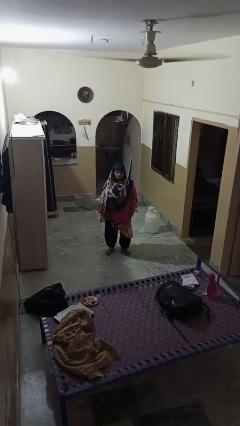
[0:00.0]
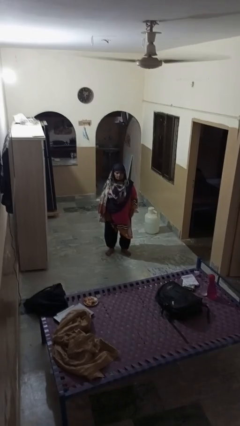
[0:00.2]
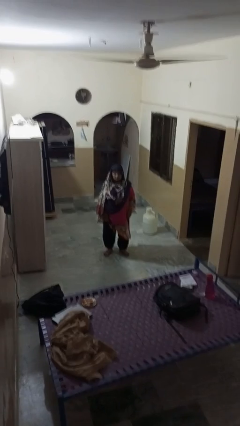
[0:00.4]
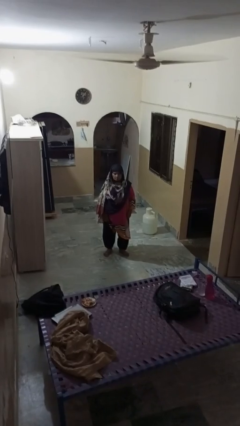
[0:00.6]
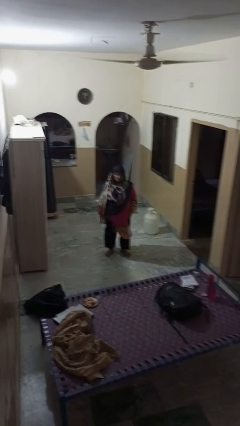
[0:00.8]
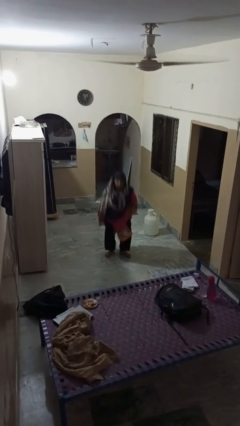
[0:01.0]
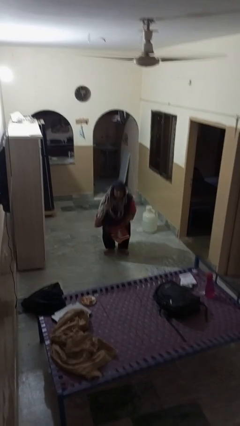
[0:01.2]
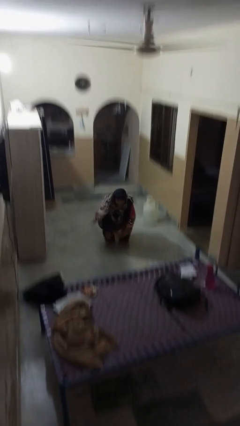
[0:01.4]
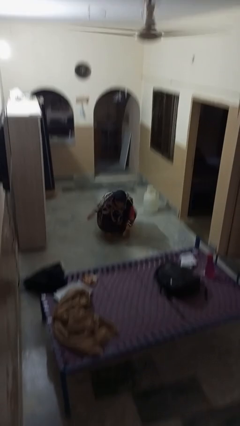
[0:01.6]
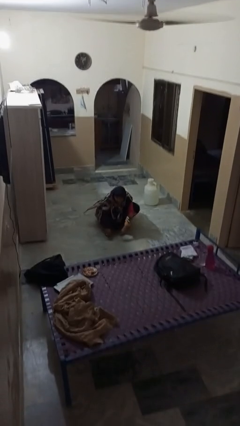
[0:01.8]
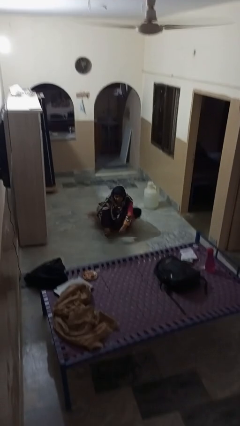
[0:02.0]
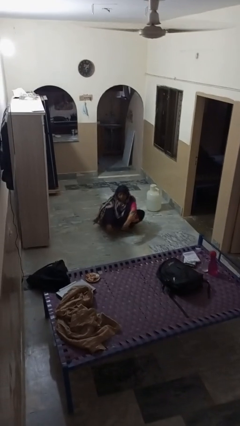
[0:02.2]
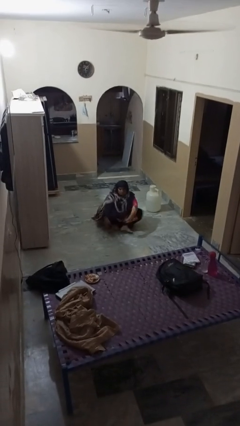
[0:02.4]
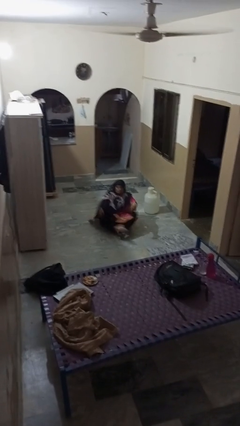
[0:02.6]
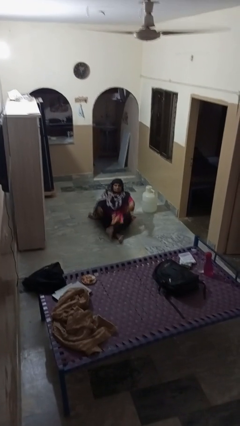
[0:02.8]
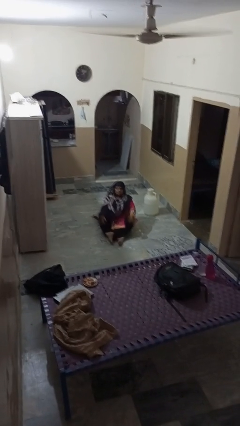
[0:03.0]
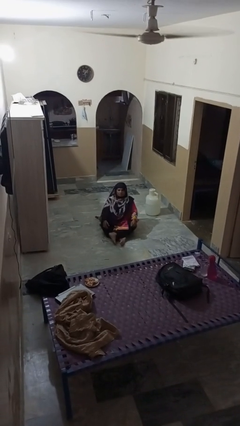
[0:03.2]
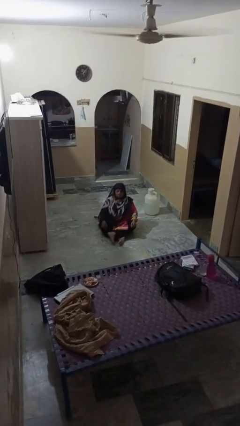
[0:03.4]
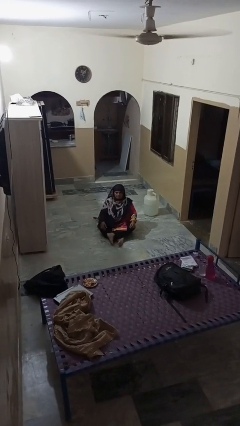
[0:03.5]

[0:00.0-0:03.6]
person sits crisscross

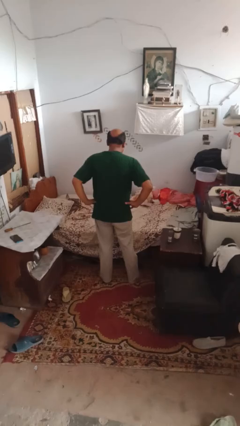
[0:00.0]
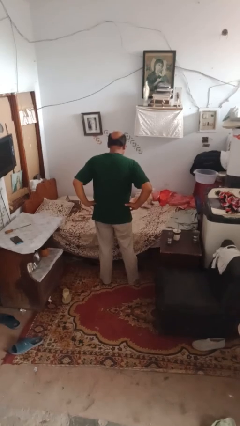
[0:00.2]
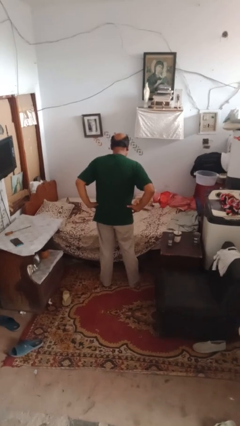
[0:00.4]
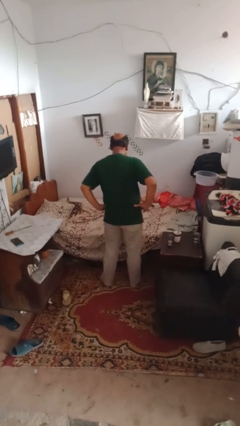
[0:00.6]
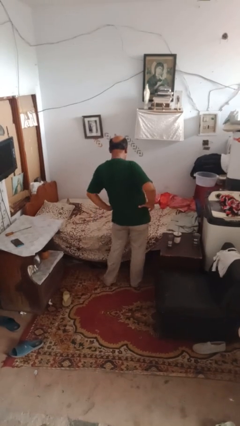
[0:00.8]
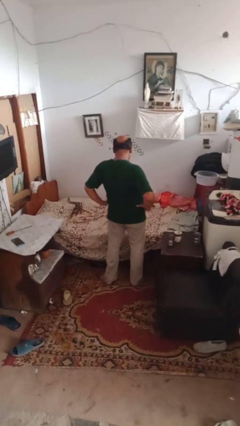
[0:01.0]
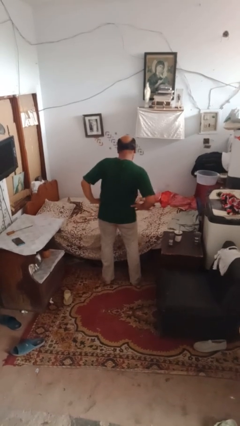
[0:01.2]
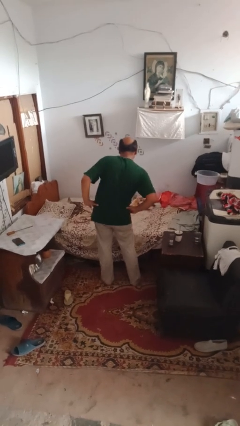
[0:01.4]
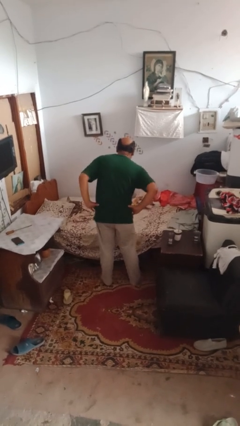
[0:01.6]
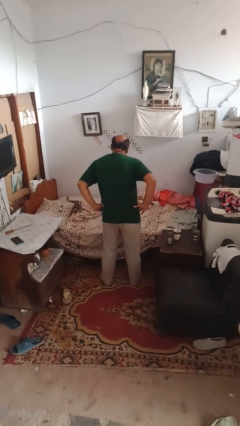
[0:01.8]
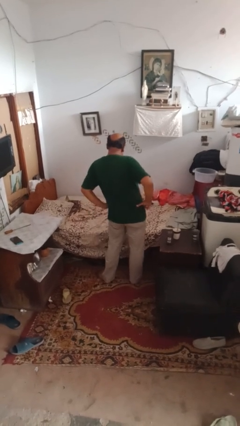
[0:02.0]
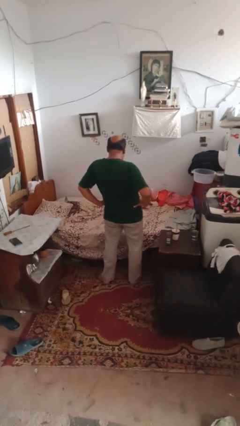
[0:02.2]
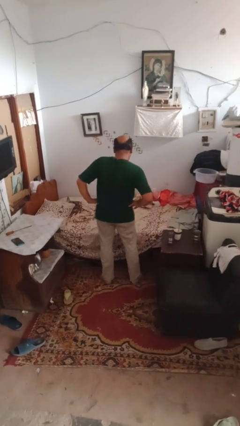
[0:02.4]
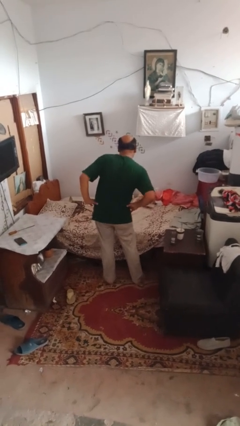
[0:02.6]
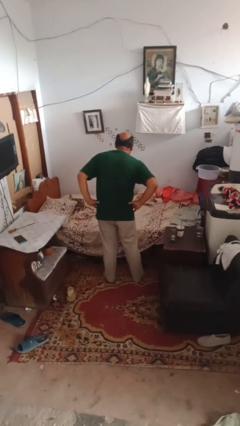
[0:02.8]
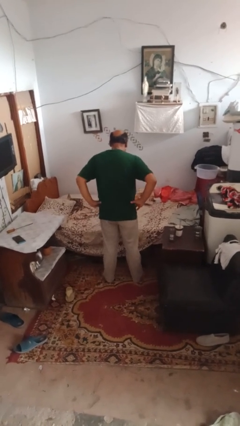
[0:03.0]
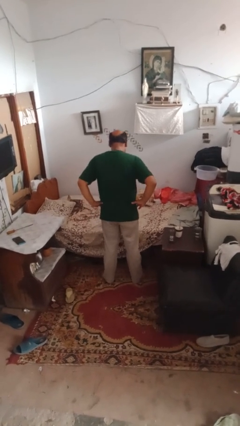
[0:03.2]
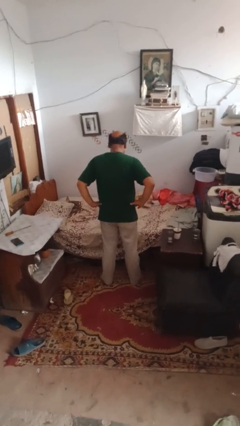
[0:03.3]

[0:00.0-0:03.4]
person wiggles hips

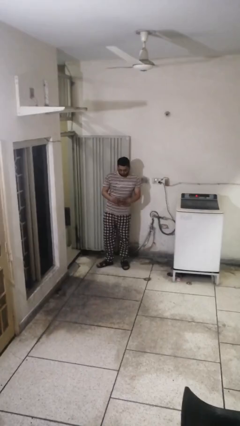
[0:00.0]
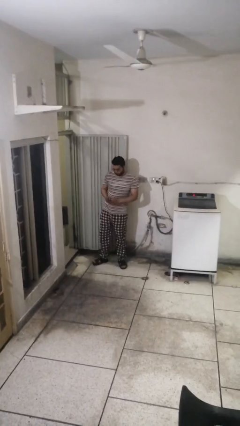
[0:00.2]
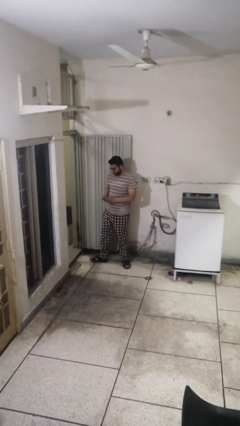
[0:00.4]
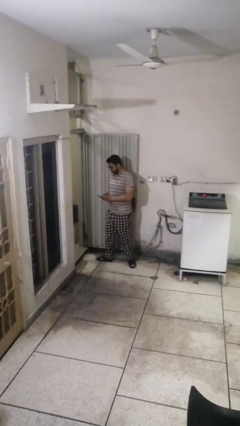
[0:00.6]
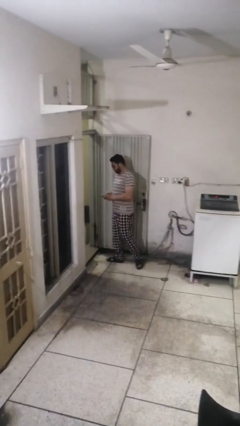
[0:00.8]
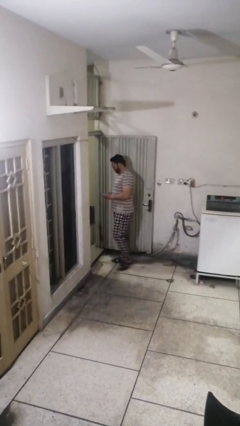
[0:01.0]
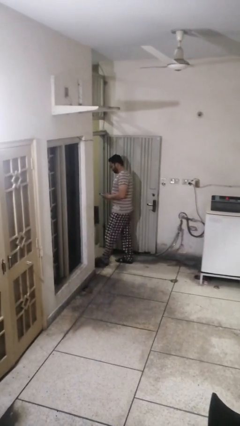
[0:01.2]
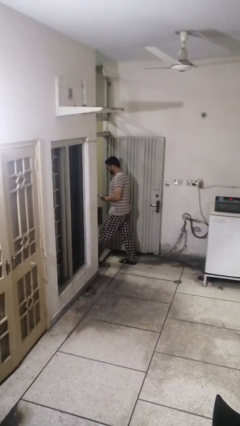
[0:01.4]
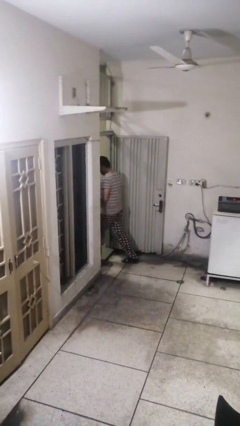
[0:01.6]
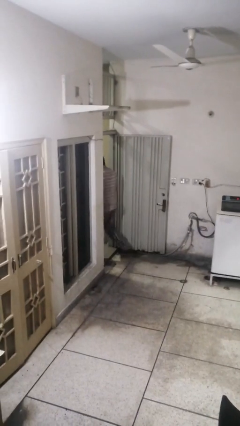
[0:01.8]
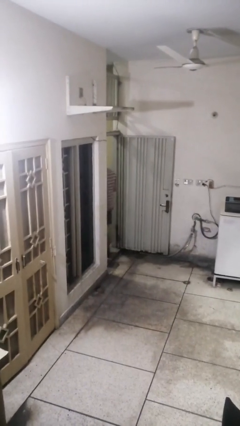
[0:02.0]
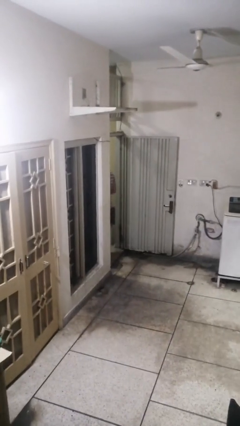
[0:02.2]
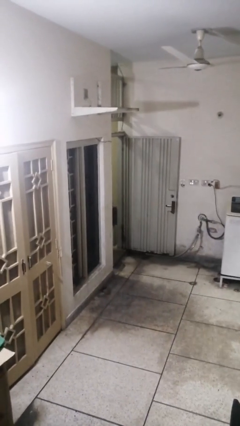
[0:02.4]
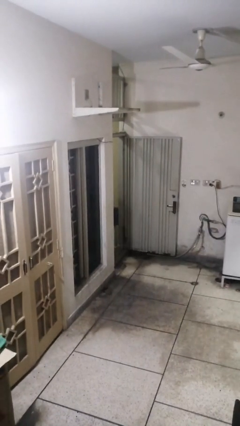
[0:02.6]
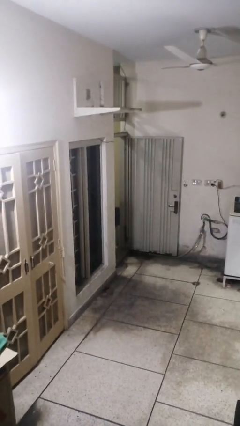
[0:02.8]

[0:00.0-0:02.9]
person exits scene through structure

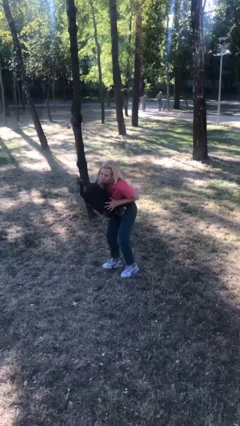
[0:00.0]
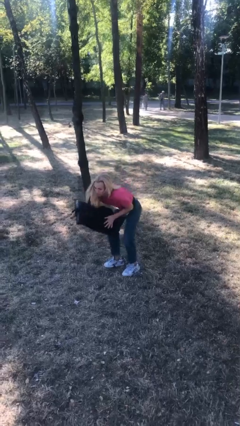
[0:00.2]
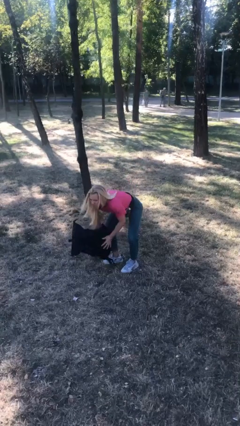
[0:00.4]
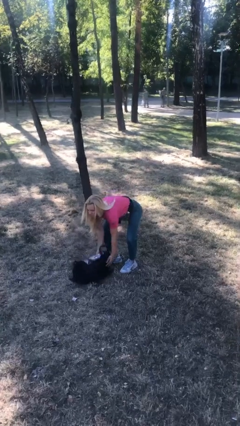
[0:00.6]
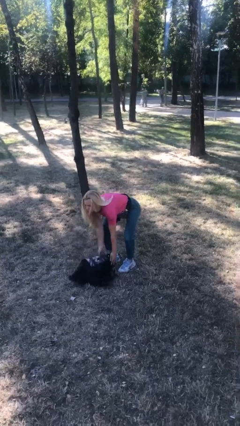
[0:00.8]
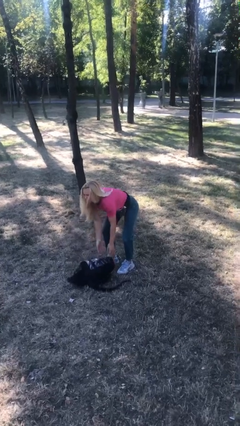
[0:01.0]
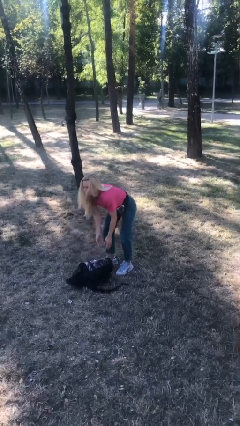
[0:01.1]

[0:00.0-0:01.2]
person puts down object on floor

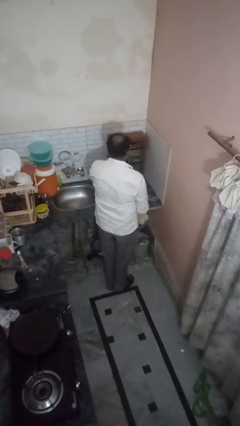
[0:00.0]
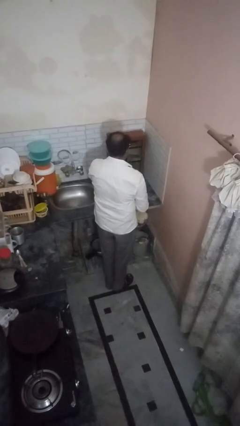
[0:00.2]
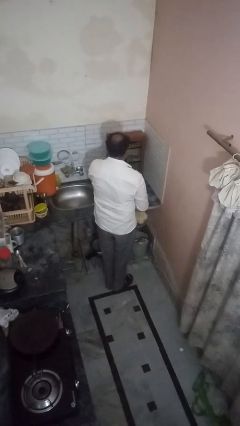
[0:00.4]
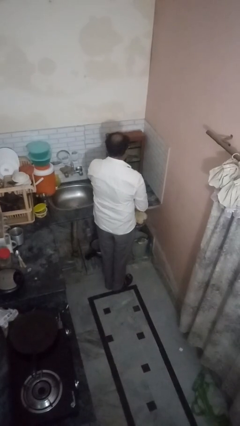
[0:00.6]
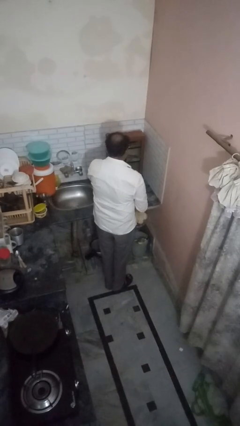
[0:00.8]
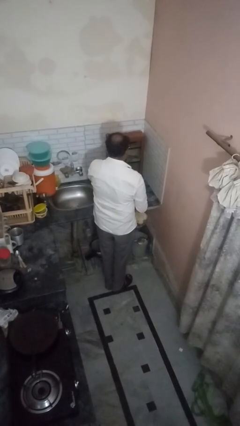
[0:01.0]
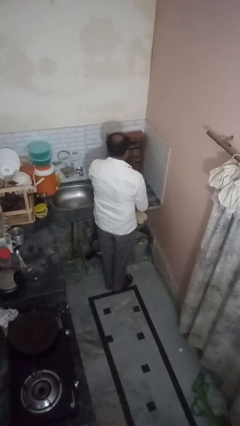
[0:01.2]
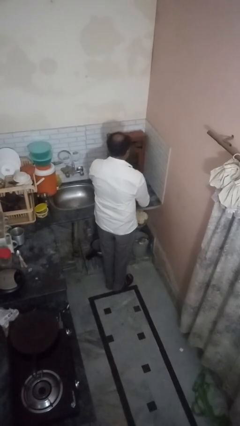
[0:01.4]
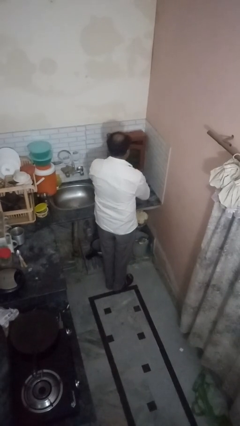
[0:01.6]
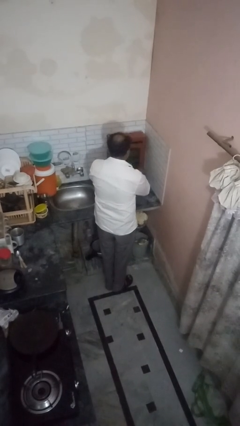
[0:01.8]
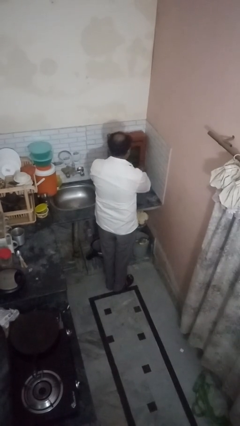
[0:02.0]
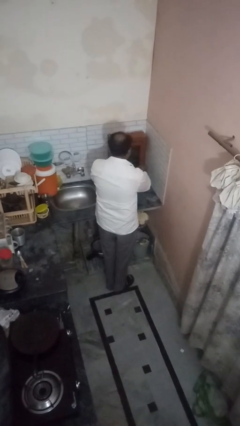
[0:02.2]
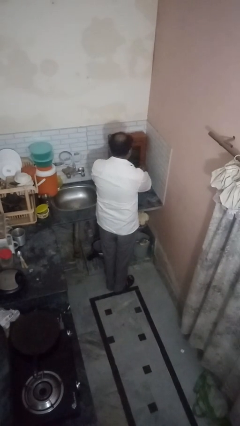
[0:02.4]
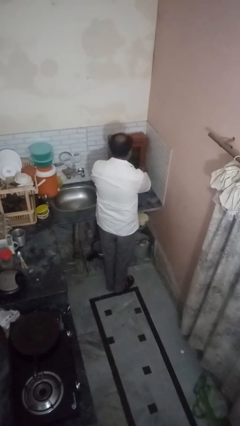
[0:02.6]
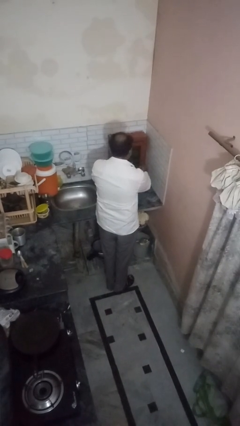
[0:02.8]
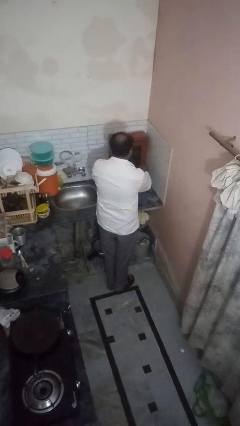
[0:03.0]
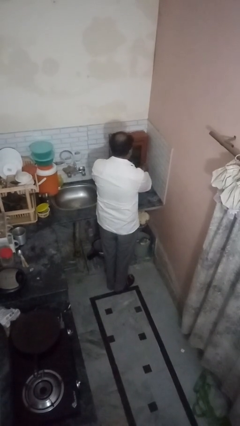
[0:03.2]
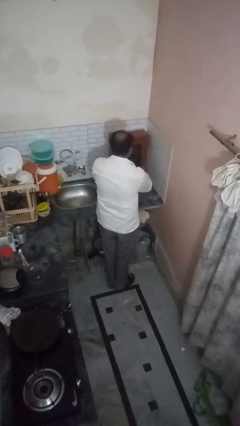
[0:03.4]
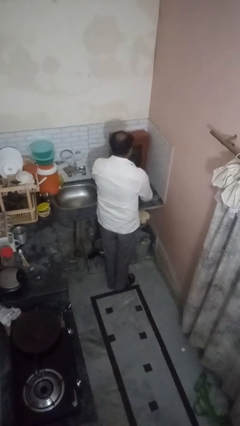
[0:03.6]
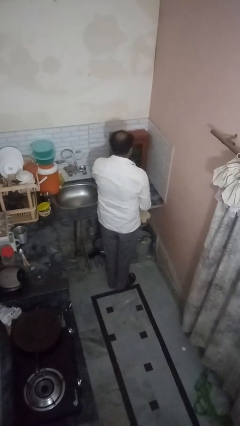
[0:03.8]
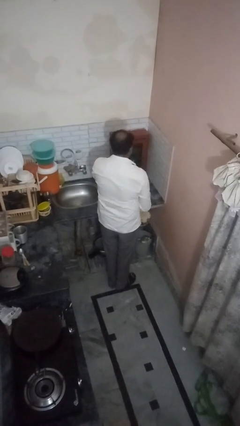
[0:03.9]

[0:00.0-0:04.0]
person closes kitchen drawer

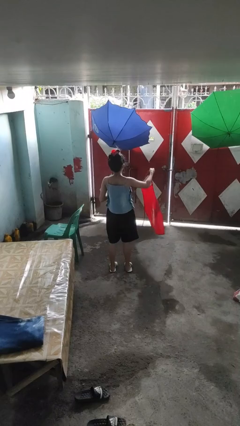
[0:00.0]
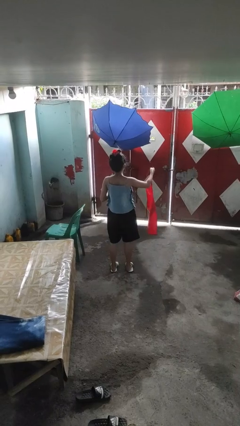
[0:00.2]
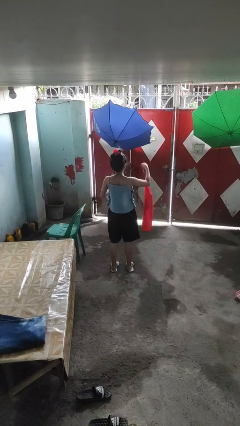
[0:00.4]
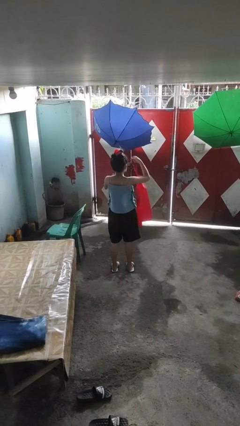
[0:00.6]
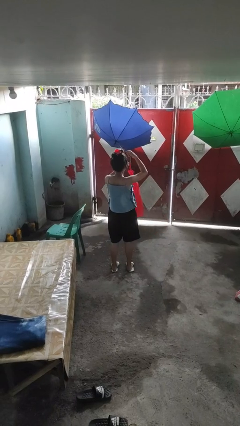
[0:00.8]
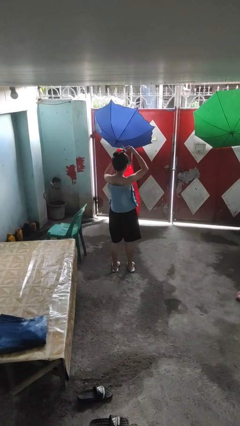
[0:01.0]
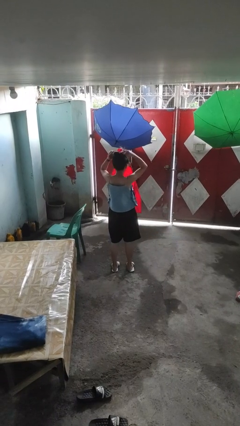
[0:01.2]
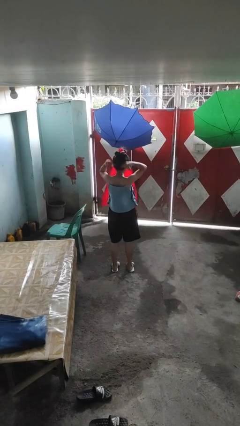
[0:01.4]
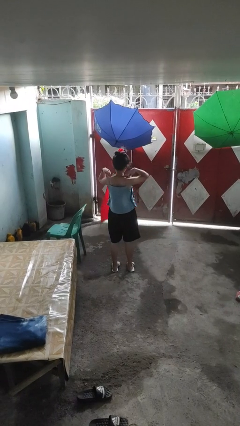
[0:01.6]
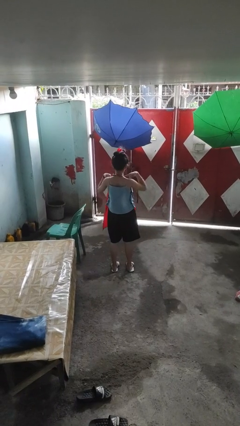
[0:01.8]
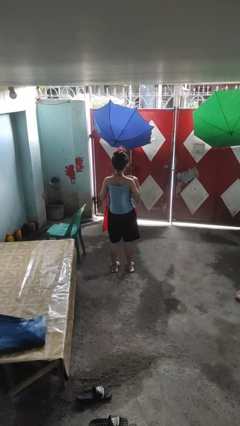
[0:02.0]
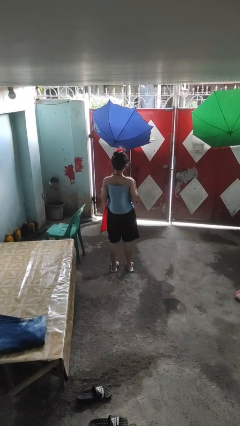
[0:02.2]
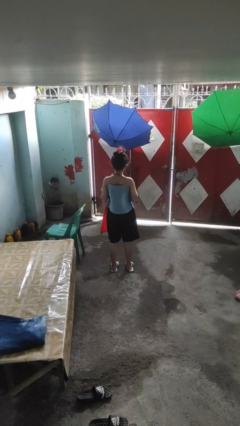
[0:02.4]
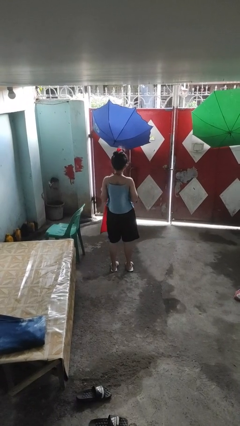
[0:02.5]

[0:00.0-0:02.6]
person puts on apron

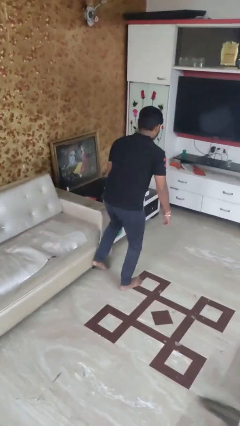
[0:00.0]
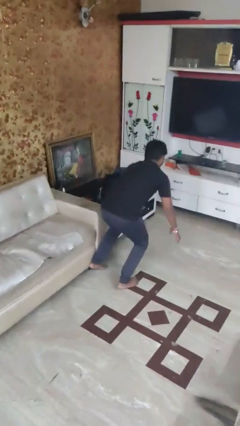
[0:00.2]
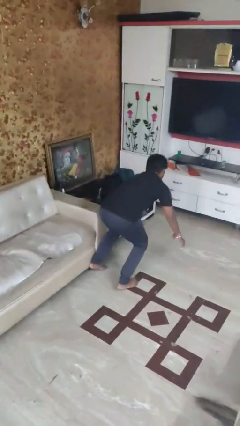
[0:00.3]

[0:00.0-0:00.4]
person trips on object on floor
